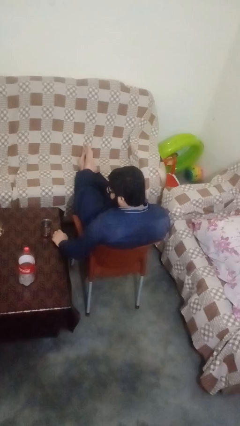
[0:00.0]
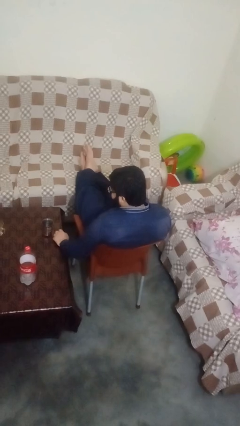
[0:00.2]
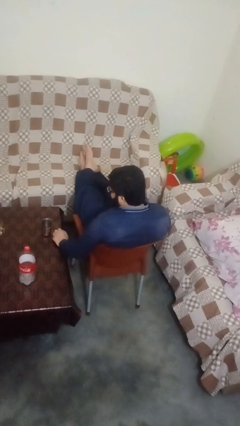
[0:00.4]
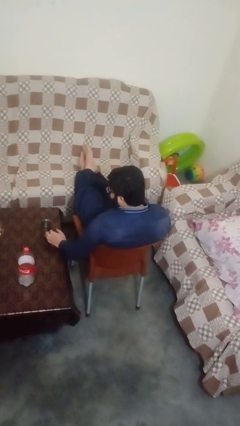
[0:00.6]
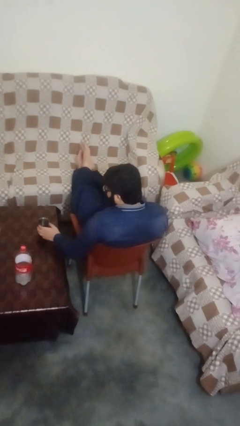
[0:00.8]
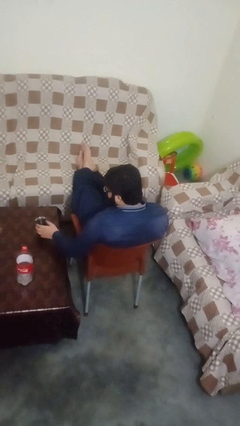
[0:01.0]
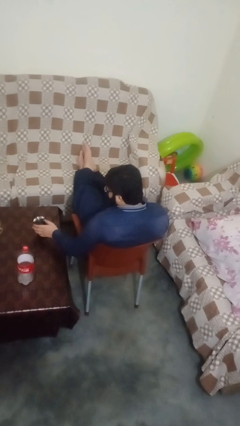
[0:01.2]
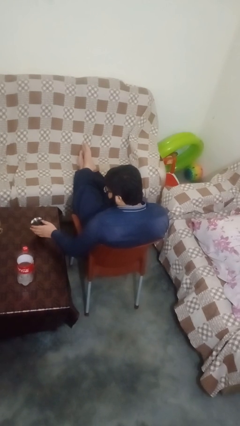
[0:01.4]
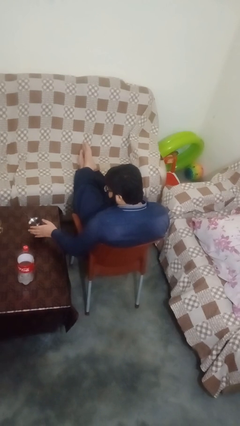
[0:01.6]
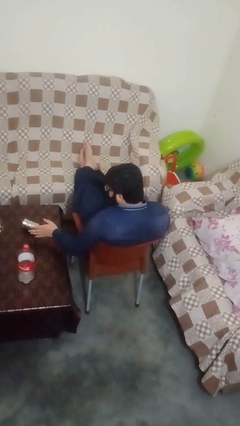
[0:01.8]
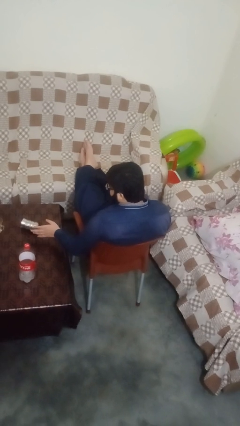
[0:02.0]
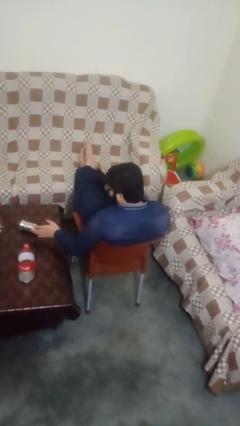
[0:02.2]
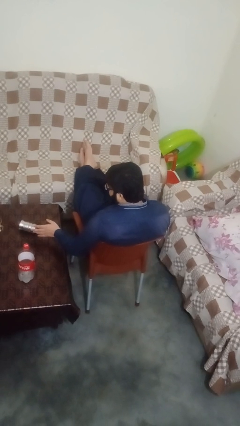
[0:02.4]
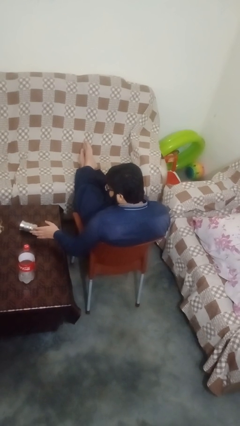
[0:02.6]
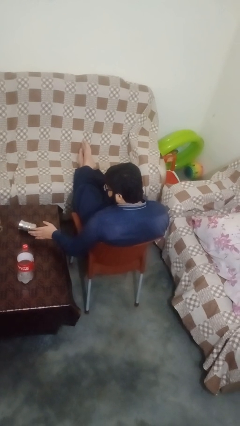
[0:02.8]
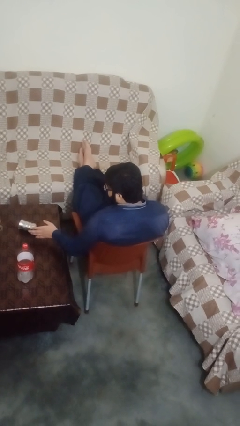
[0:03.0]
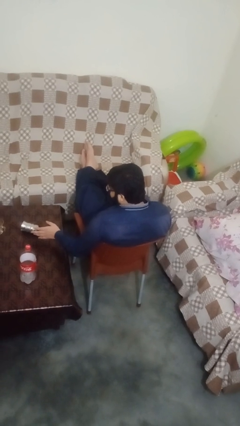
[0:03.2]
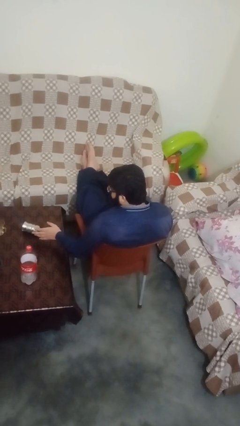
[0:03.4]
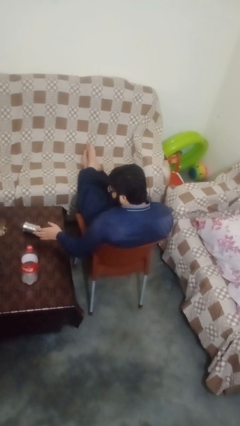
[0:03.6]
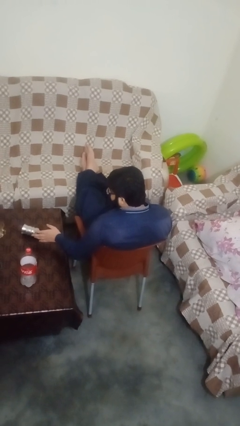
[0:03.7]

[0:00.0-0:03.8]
person spills on table

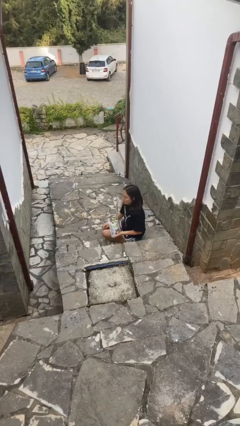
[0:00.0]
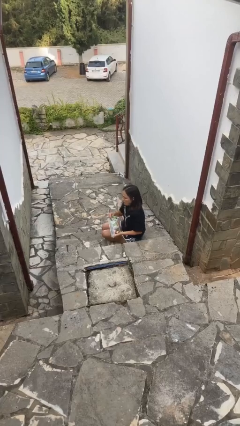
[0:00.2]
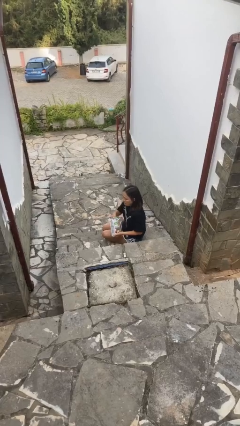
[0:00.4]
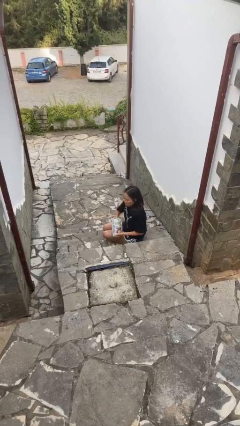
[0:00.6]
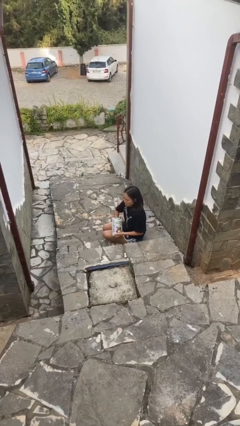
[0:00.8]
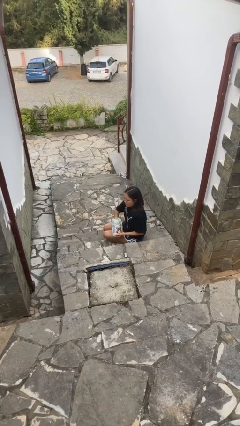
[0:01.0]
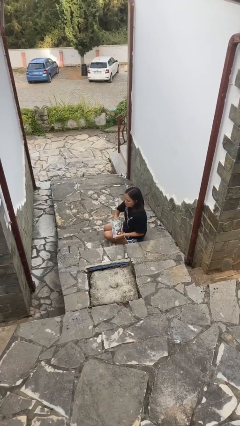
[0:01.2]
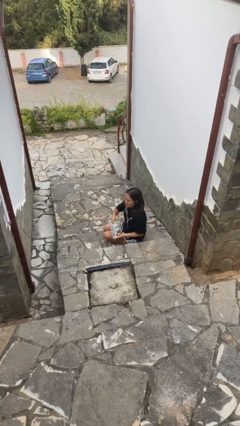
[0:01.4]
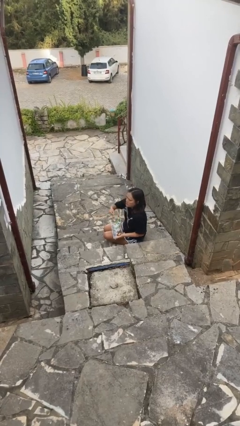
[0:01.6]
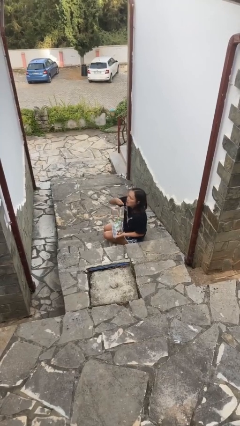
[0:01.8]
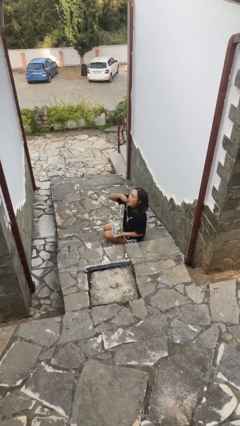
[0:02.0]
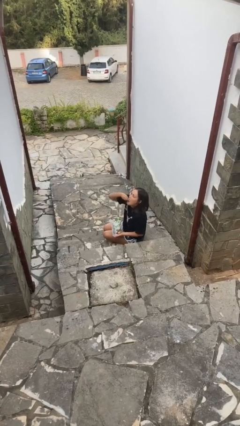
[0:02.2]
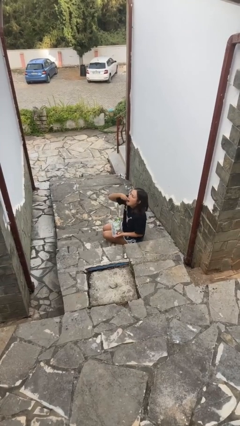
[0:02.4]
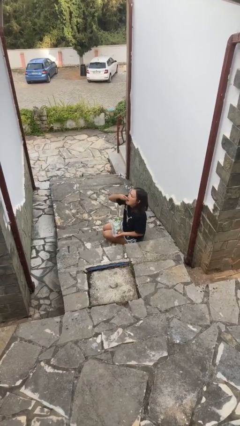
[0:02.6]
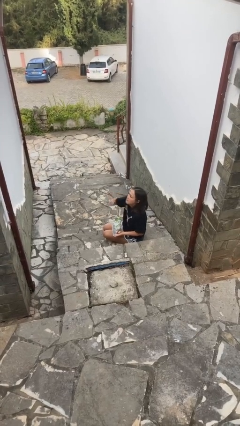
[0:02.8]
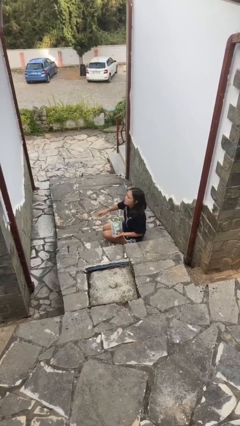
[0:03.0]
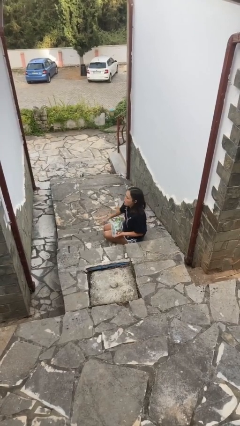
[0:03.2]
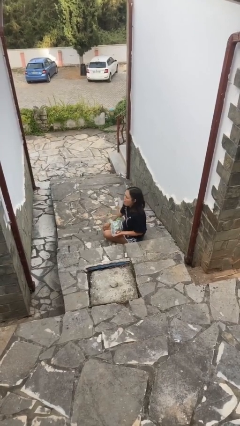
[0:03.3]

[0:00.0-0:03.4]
person eats snack from bag

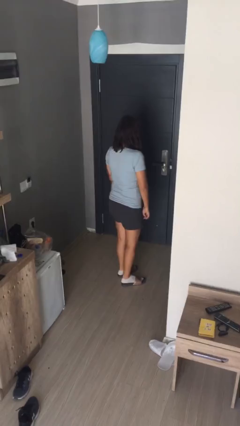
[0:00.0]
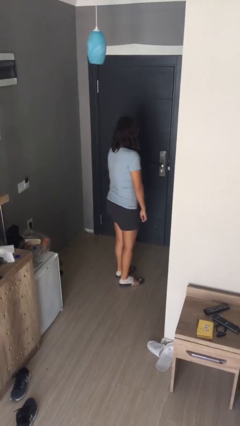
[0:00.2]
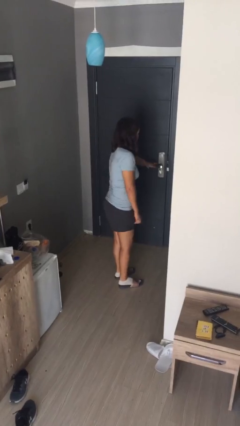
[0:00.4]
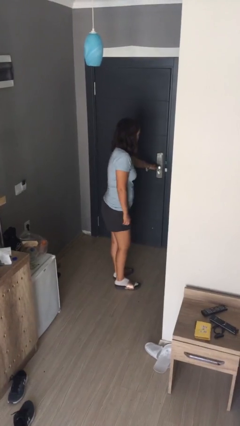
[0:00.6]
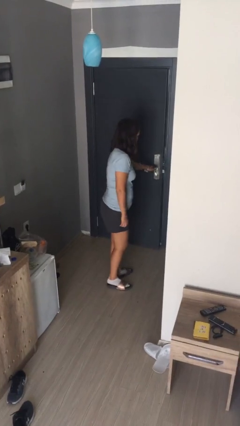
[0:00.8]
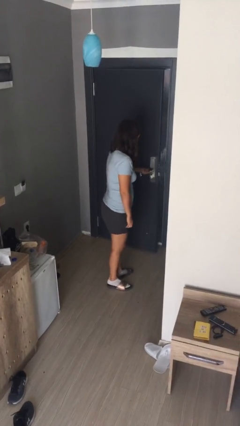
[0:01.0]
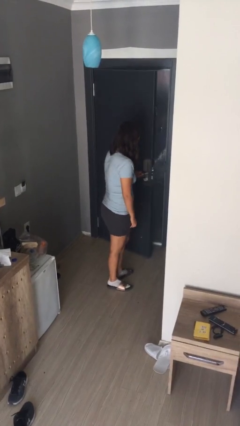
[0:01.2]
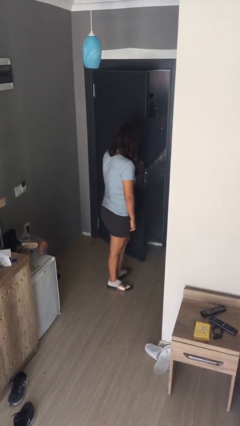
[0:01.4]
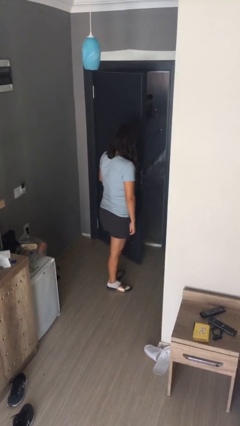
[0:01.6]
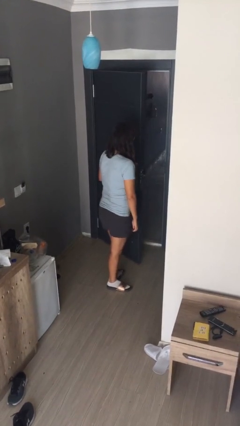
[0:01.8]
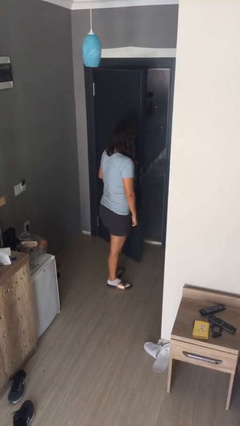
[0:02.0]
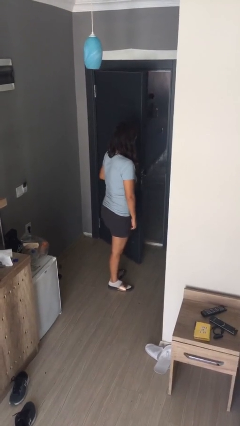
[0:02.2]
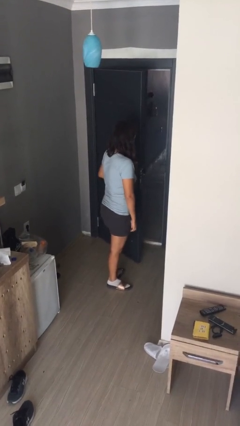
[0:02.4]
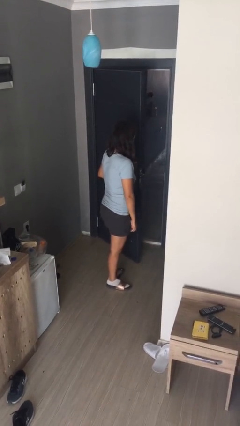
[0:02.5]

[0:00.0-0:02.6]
person opens facility door

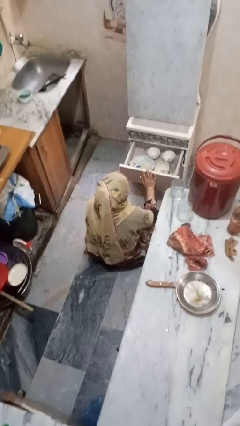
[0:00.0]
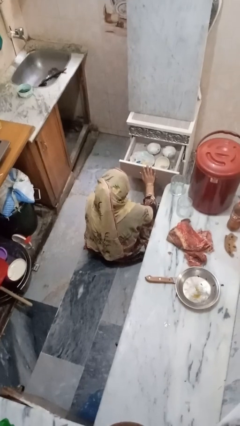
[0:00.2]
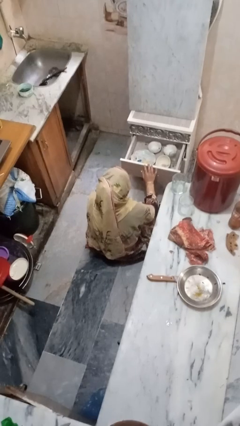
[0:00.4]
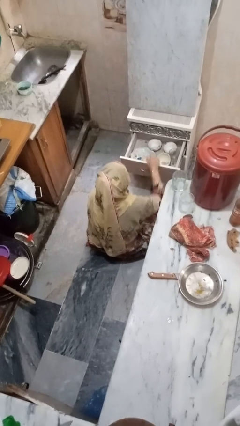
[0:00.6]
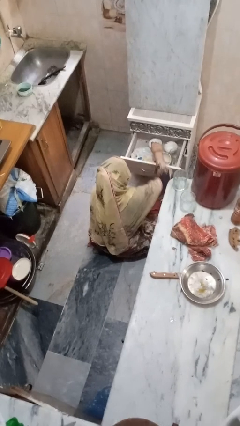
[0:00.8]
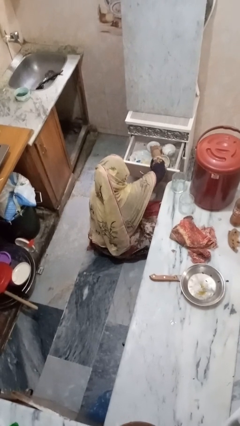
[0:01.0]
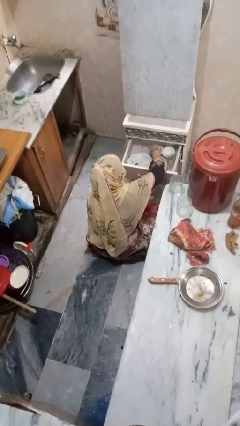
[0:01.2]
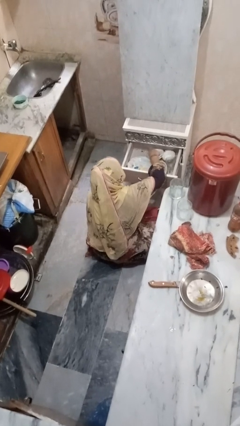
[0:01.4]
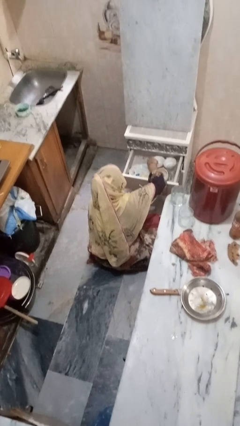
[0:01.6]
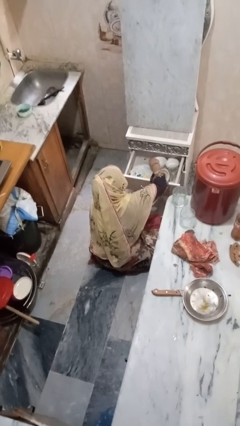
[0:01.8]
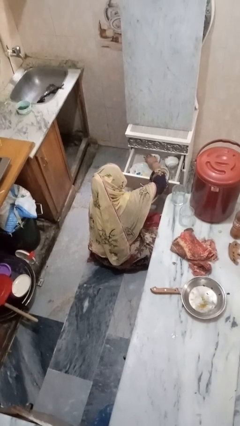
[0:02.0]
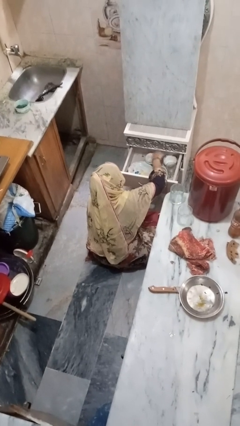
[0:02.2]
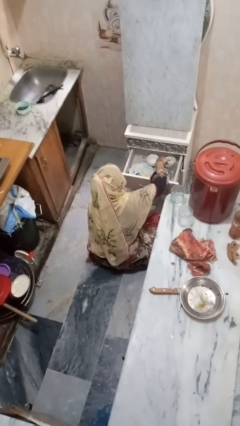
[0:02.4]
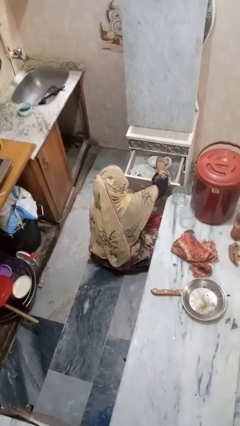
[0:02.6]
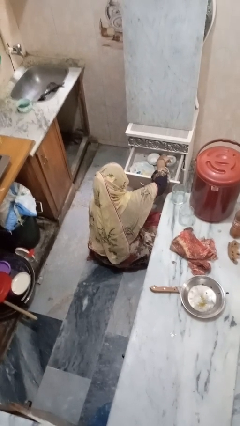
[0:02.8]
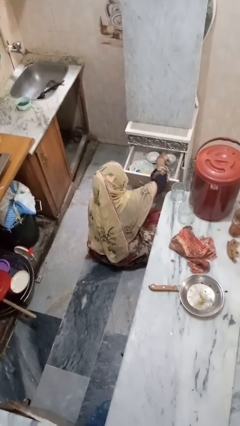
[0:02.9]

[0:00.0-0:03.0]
person searches in kitchen drawer

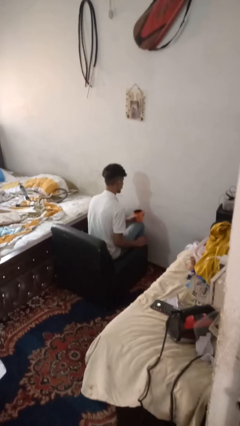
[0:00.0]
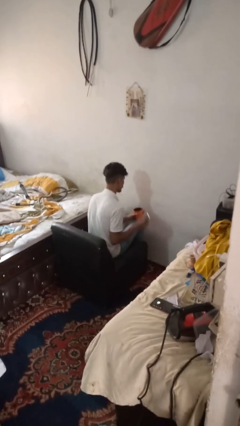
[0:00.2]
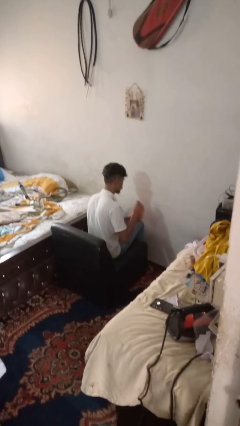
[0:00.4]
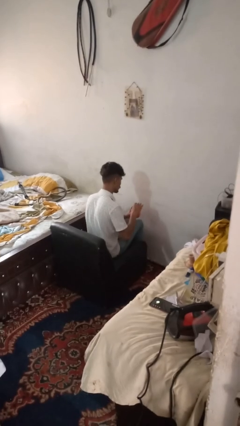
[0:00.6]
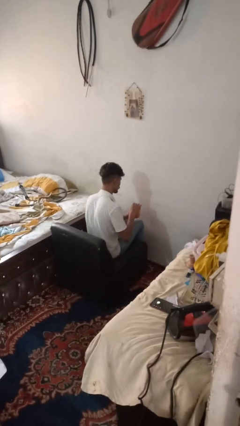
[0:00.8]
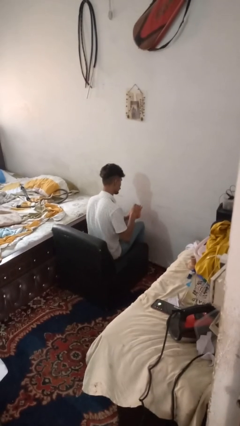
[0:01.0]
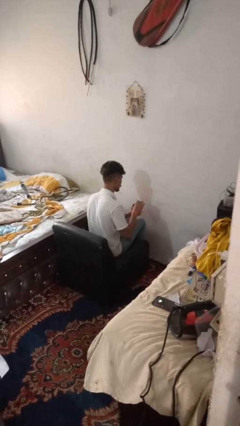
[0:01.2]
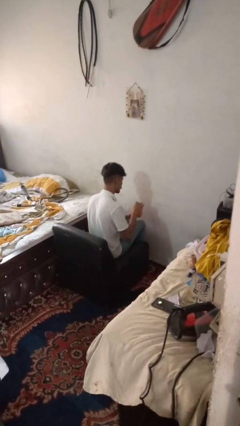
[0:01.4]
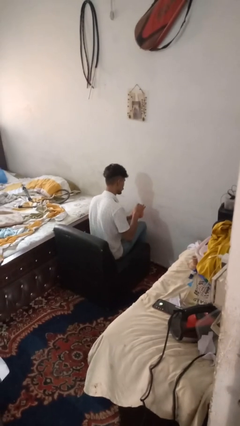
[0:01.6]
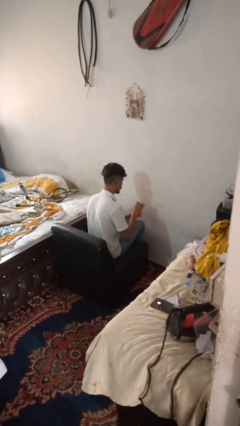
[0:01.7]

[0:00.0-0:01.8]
person stirs mug

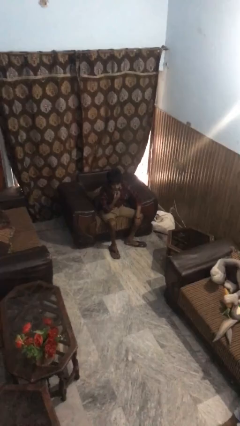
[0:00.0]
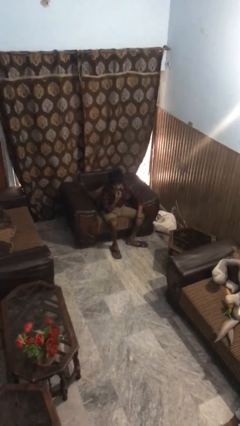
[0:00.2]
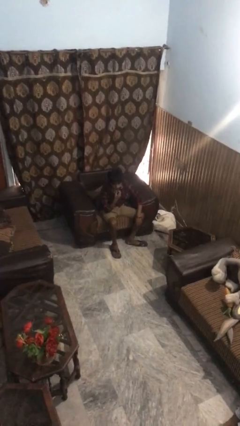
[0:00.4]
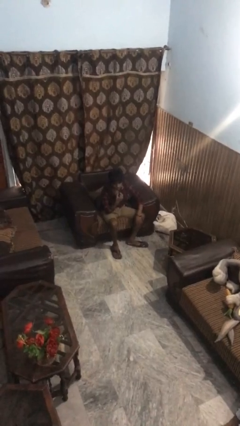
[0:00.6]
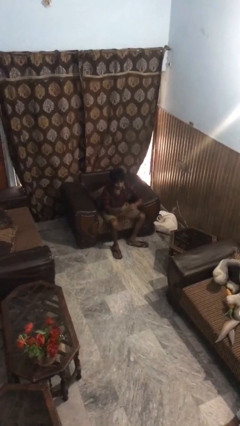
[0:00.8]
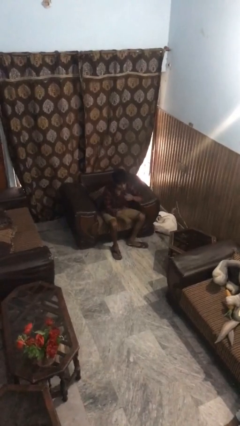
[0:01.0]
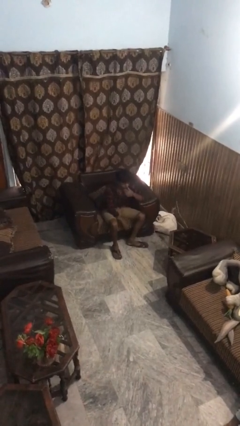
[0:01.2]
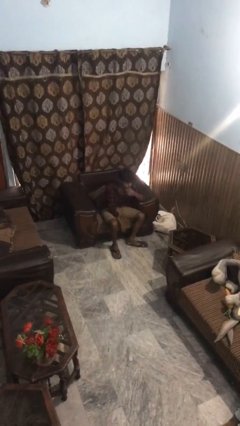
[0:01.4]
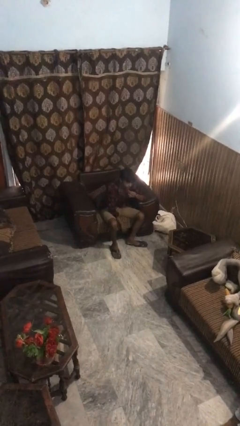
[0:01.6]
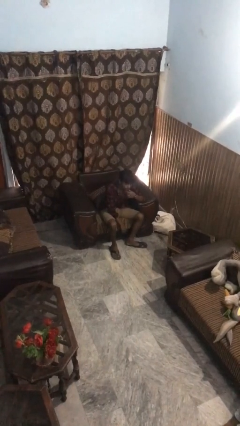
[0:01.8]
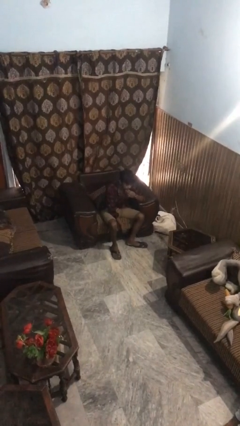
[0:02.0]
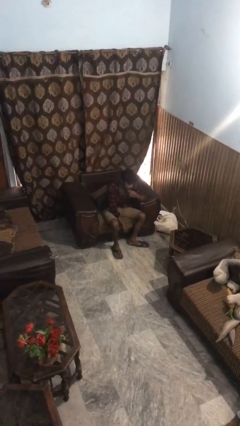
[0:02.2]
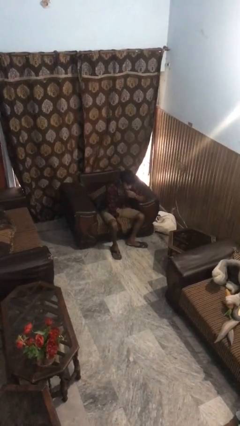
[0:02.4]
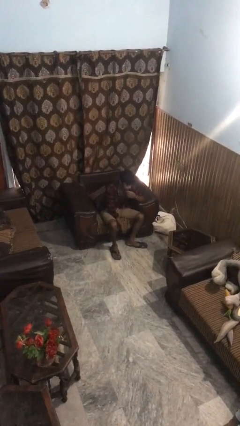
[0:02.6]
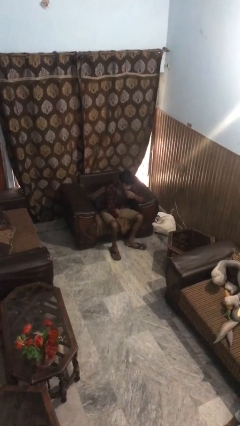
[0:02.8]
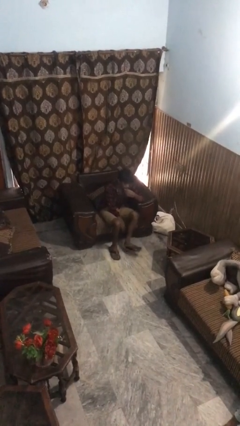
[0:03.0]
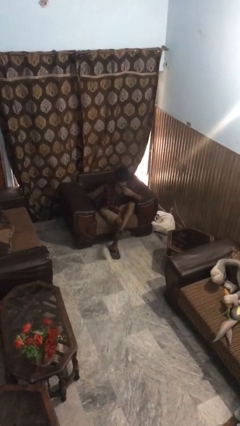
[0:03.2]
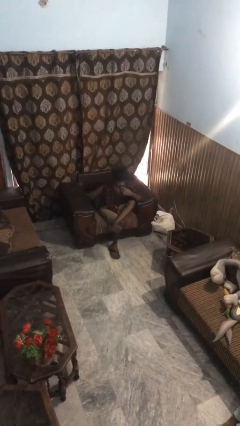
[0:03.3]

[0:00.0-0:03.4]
person strokes chin
